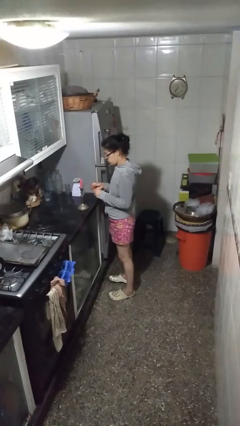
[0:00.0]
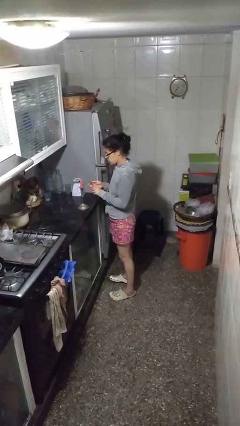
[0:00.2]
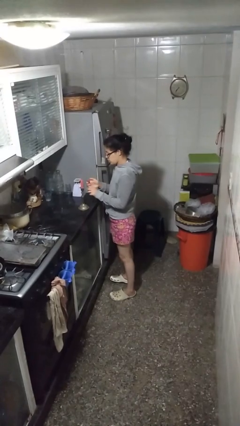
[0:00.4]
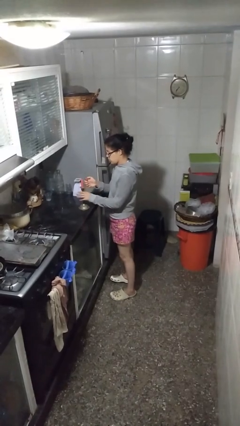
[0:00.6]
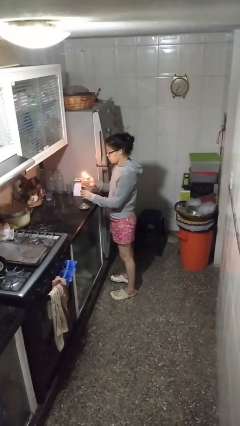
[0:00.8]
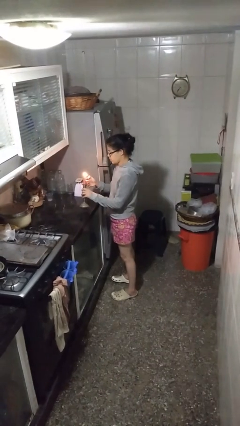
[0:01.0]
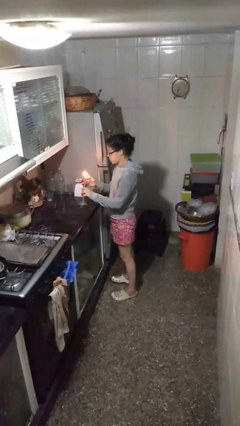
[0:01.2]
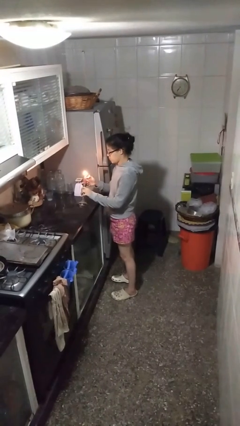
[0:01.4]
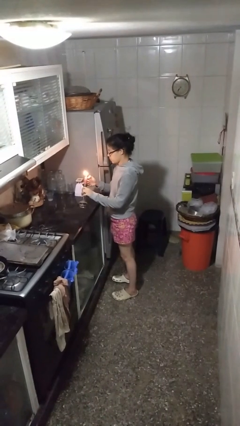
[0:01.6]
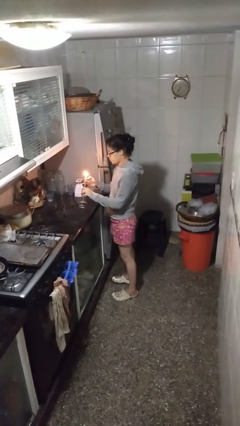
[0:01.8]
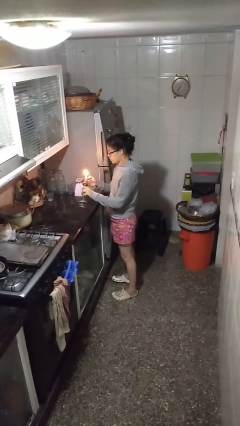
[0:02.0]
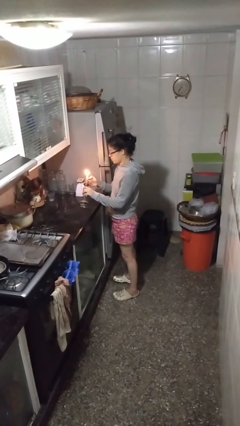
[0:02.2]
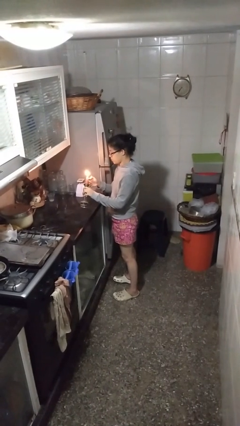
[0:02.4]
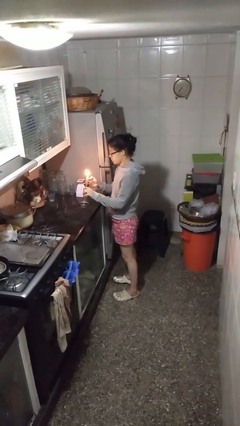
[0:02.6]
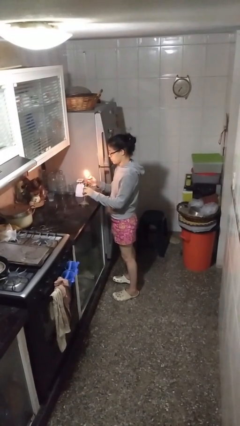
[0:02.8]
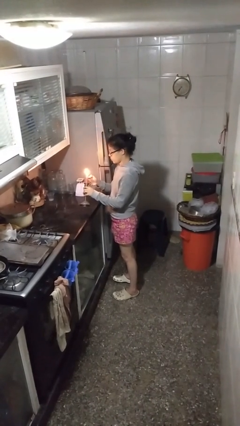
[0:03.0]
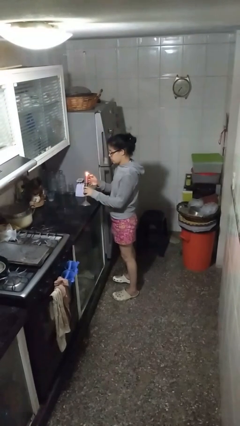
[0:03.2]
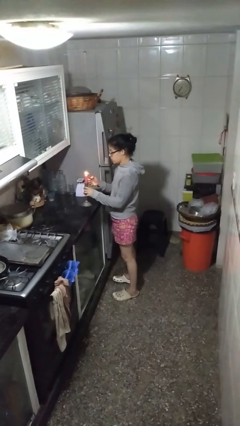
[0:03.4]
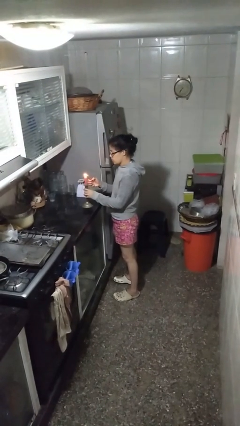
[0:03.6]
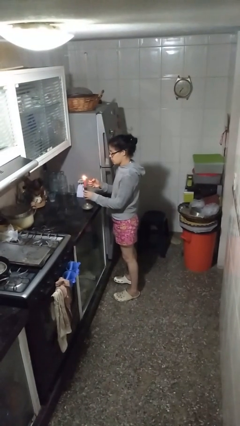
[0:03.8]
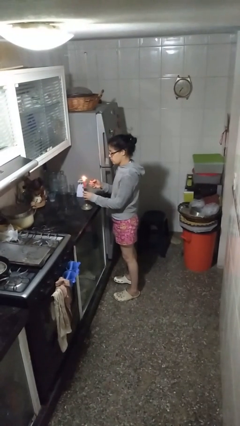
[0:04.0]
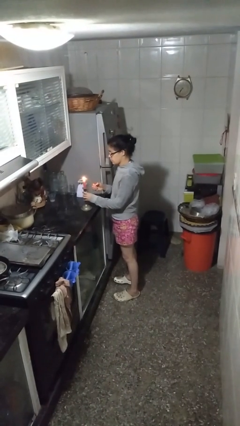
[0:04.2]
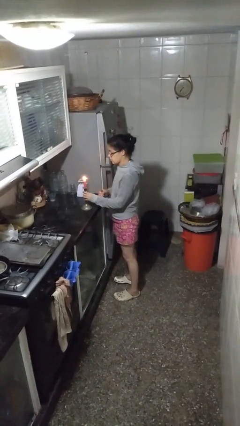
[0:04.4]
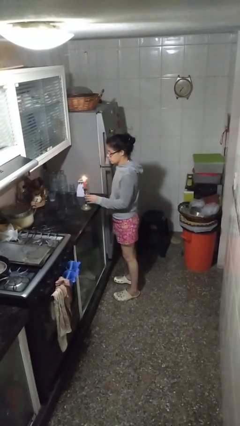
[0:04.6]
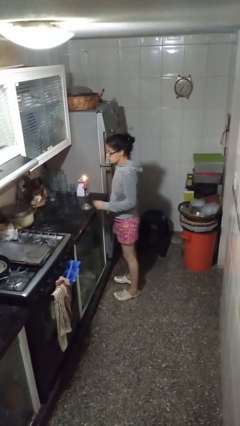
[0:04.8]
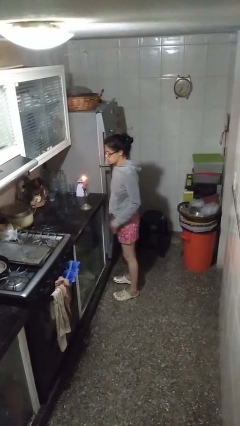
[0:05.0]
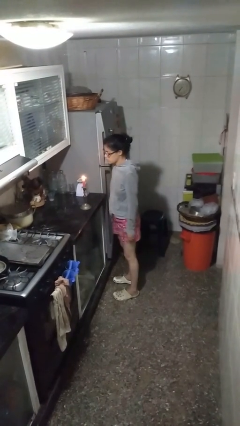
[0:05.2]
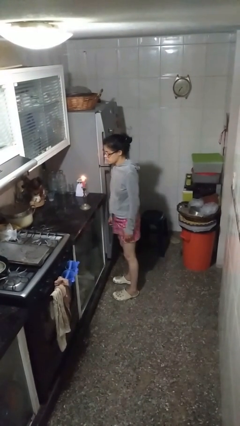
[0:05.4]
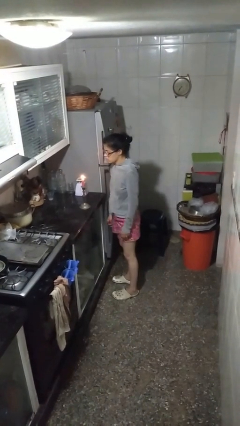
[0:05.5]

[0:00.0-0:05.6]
person lights candle

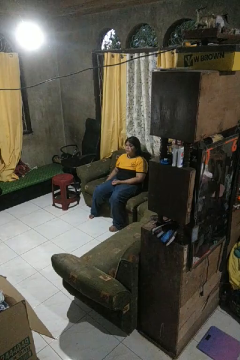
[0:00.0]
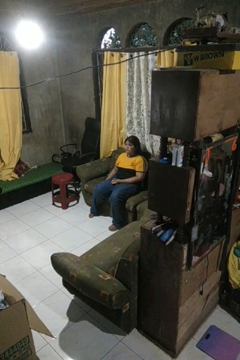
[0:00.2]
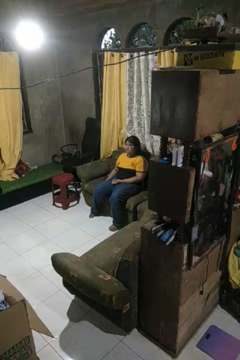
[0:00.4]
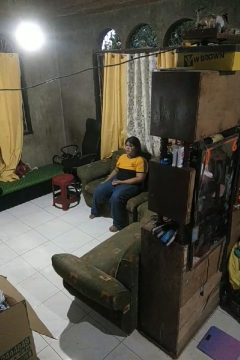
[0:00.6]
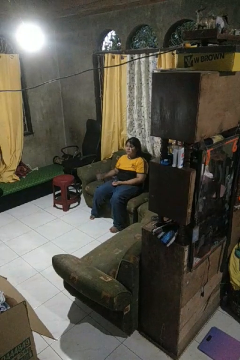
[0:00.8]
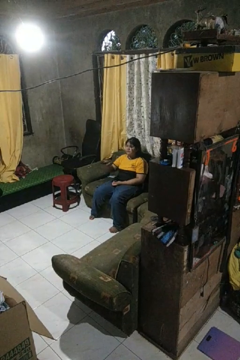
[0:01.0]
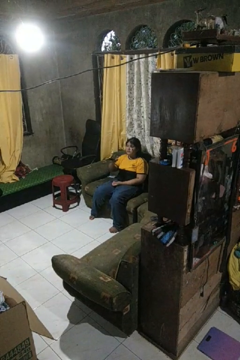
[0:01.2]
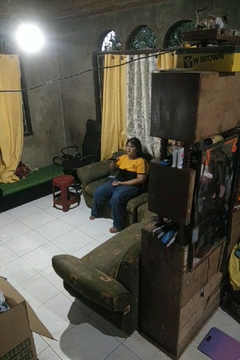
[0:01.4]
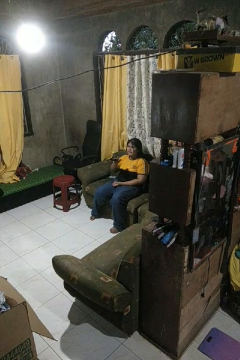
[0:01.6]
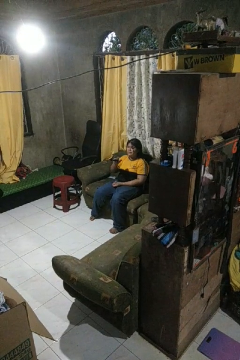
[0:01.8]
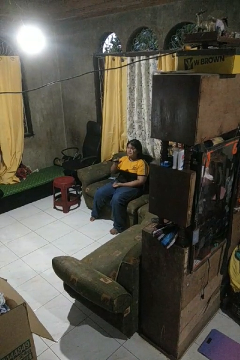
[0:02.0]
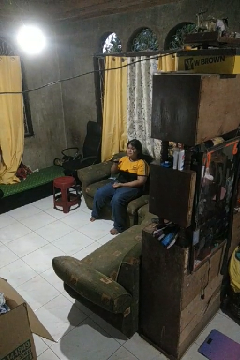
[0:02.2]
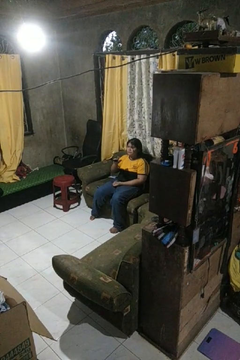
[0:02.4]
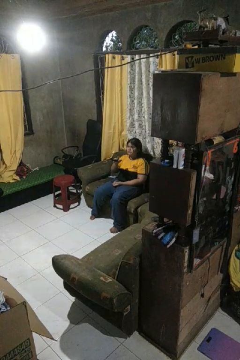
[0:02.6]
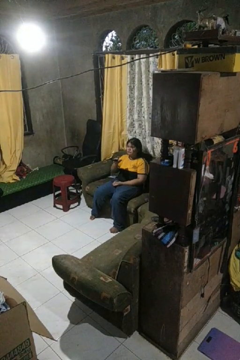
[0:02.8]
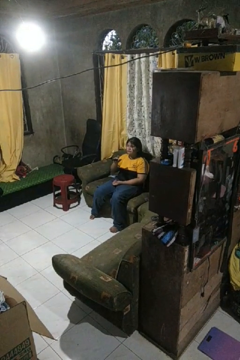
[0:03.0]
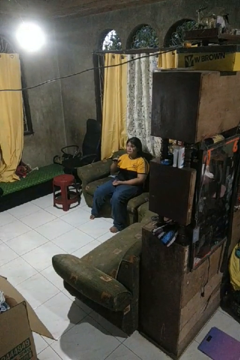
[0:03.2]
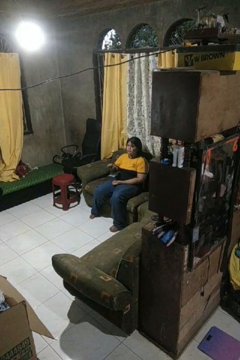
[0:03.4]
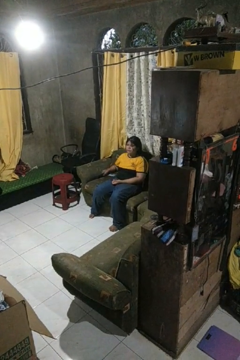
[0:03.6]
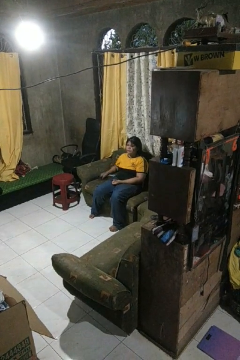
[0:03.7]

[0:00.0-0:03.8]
person uses television remote

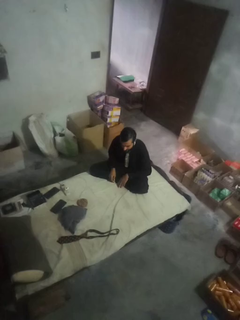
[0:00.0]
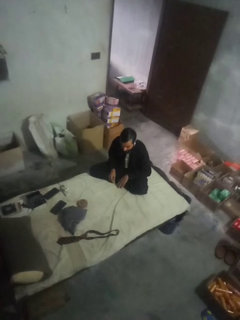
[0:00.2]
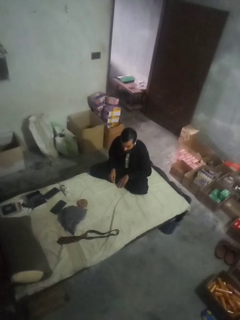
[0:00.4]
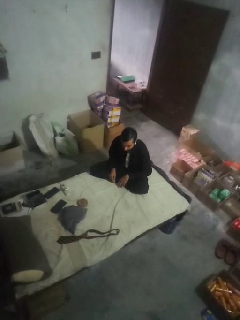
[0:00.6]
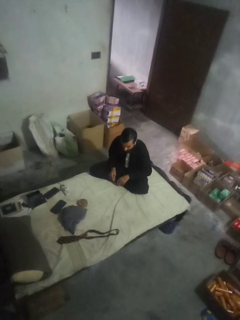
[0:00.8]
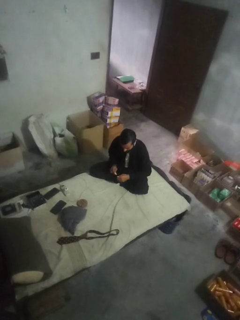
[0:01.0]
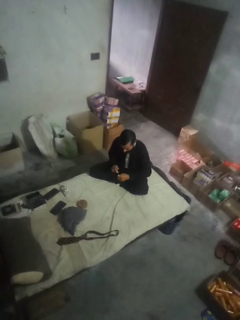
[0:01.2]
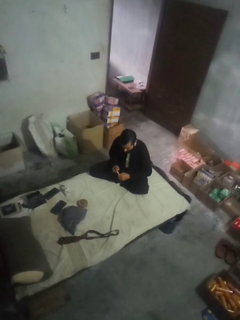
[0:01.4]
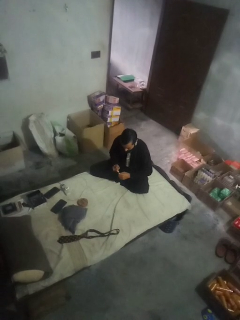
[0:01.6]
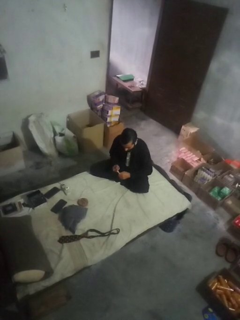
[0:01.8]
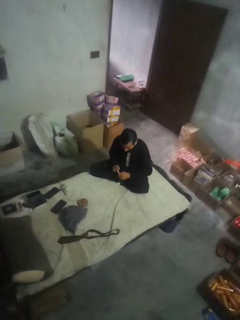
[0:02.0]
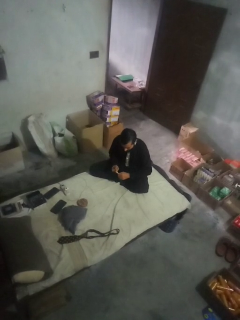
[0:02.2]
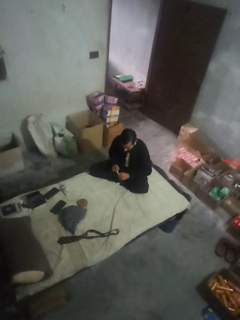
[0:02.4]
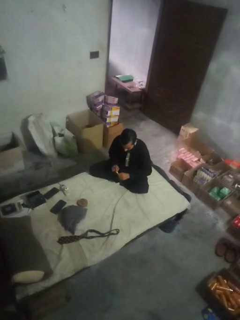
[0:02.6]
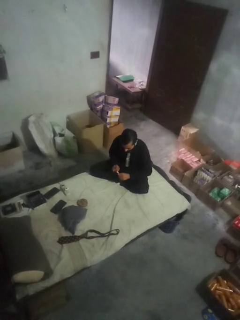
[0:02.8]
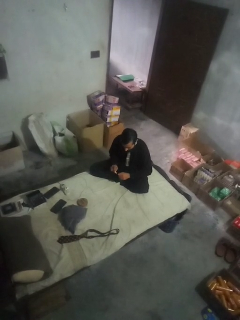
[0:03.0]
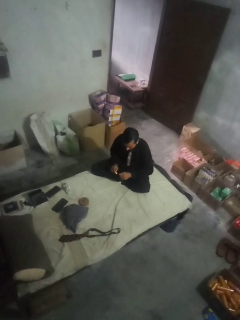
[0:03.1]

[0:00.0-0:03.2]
person paints fingernails

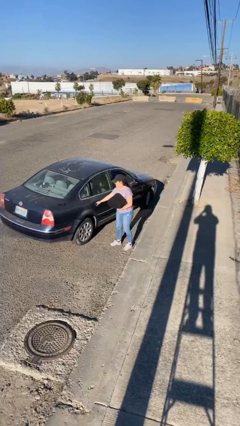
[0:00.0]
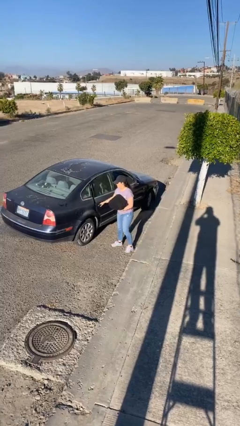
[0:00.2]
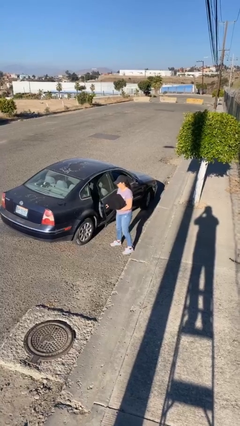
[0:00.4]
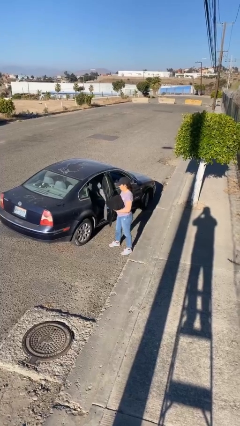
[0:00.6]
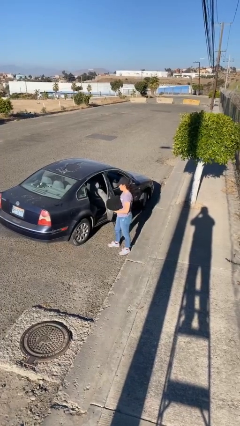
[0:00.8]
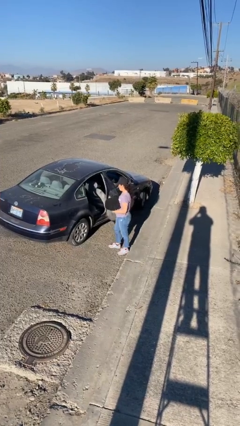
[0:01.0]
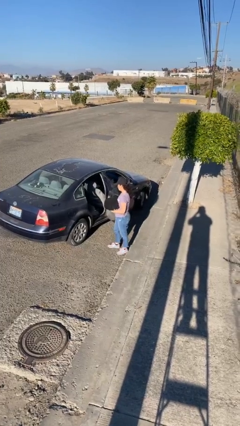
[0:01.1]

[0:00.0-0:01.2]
person opens car door

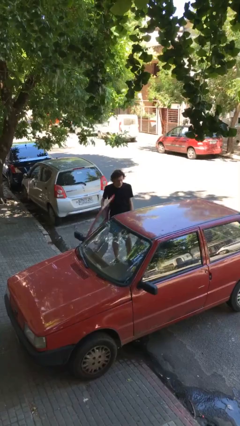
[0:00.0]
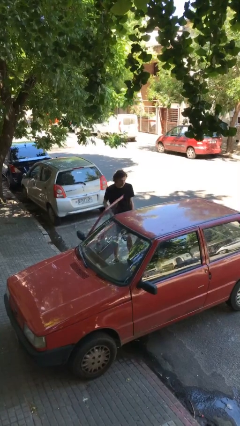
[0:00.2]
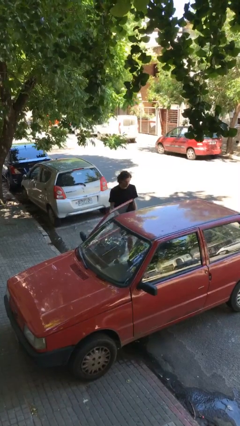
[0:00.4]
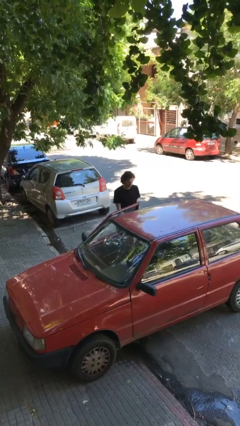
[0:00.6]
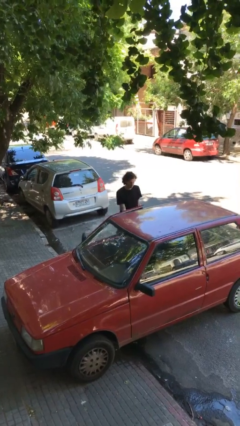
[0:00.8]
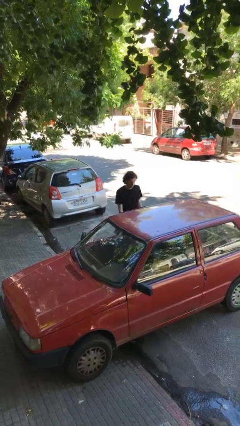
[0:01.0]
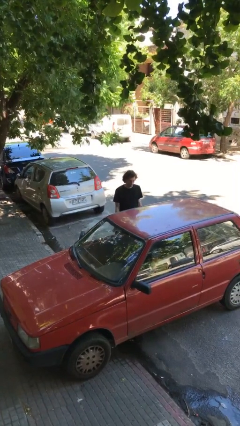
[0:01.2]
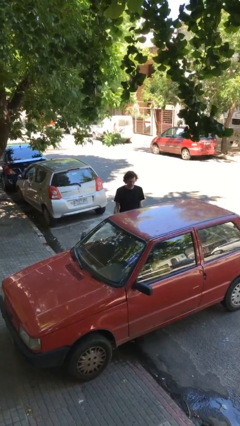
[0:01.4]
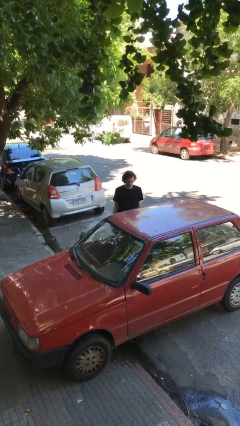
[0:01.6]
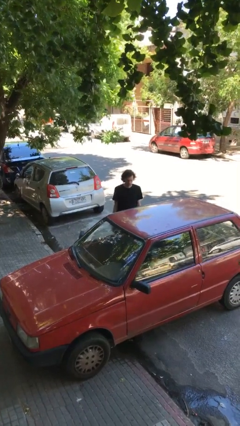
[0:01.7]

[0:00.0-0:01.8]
person closes car door

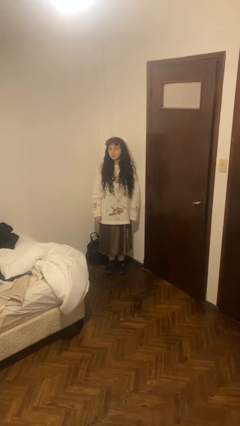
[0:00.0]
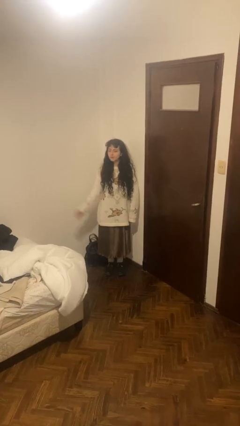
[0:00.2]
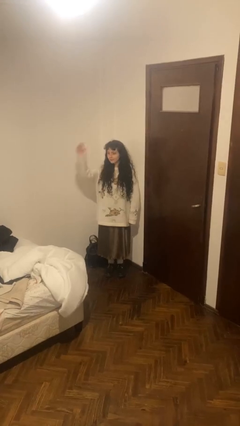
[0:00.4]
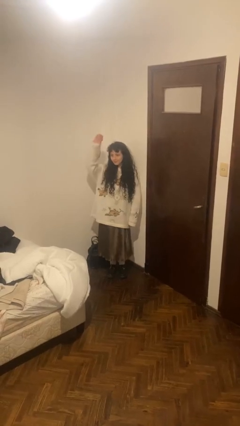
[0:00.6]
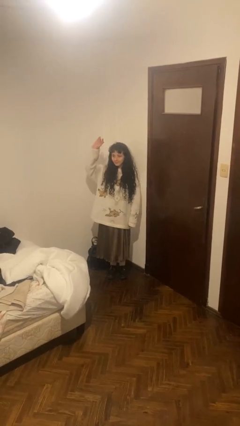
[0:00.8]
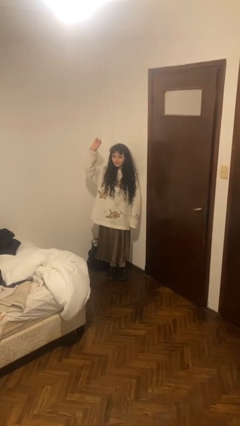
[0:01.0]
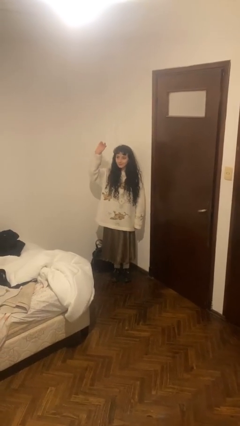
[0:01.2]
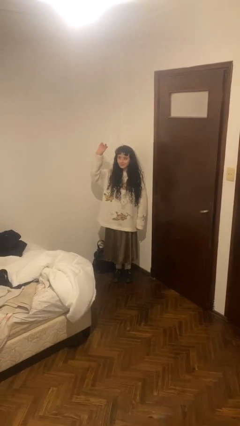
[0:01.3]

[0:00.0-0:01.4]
person gestures raise hand

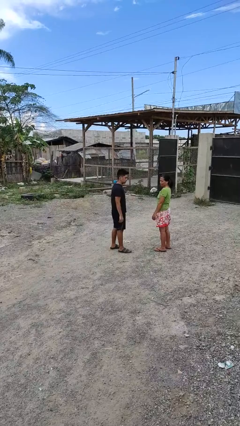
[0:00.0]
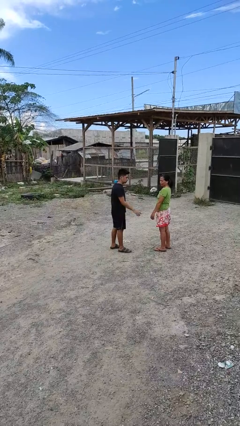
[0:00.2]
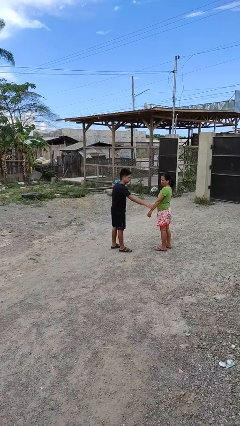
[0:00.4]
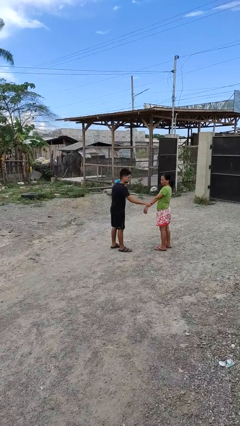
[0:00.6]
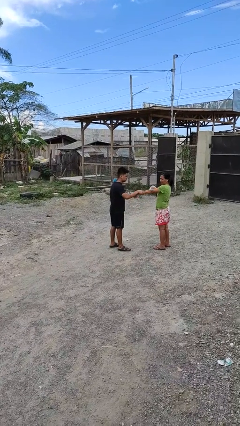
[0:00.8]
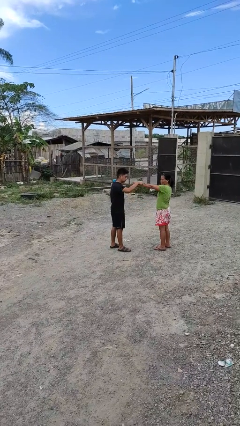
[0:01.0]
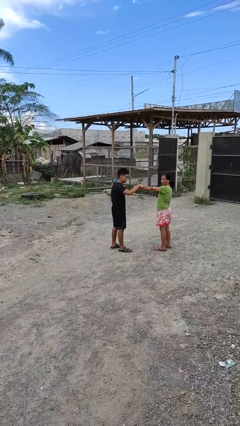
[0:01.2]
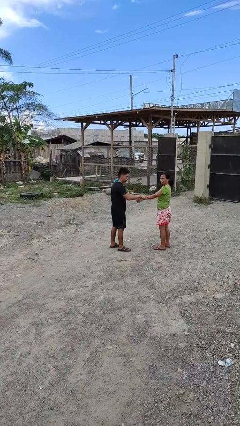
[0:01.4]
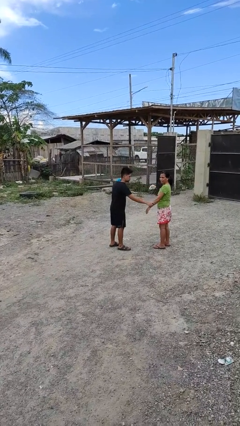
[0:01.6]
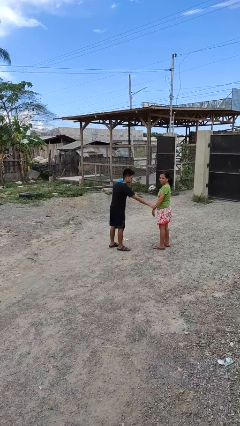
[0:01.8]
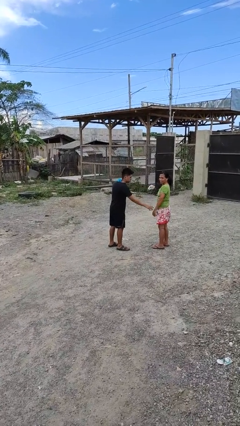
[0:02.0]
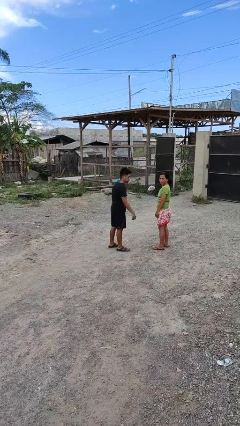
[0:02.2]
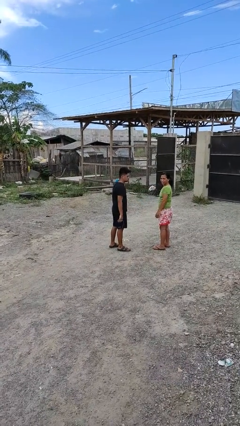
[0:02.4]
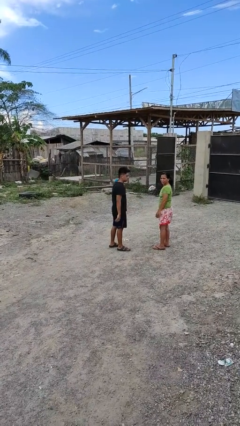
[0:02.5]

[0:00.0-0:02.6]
person grabs person by forearm
